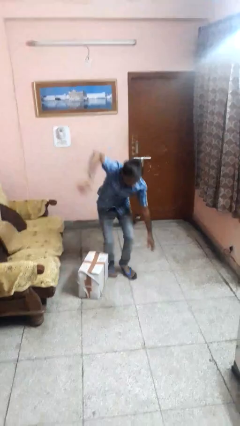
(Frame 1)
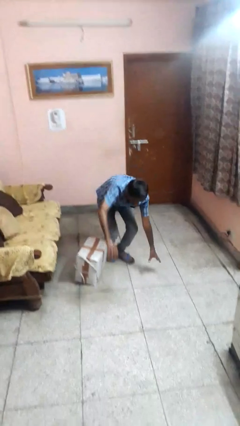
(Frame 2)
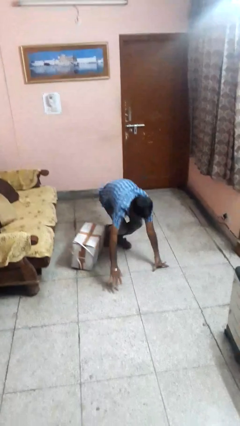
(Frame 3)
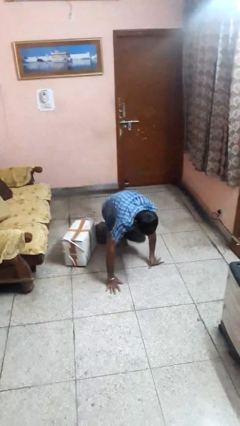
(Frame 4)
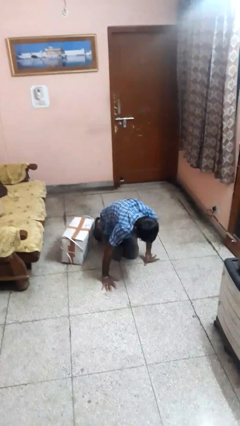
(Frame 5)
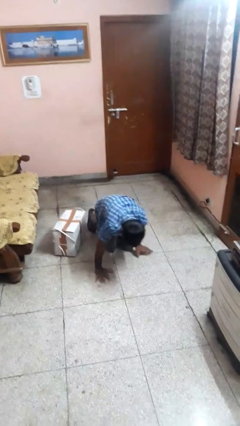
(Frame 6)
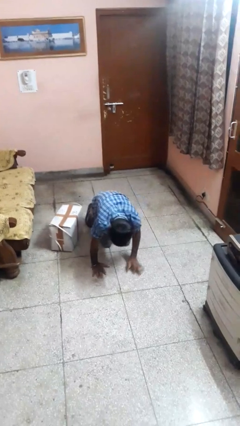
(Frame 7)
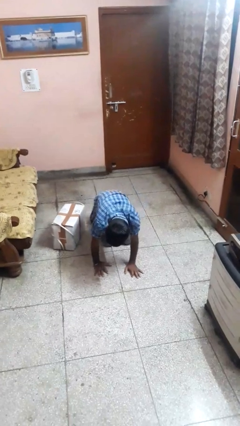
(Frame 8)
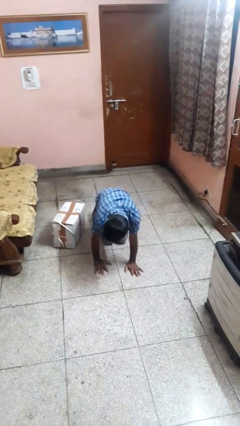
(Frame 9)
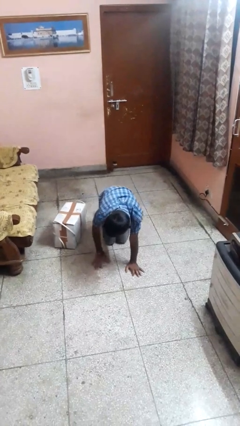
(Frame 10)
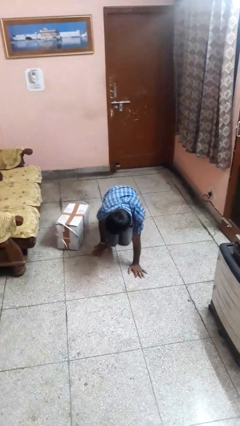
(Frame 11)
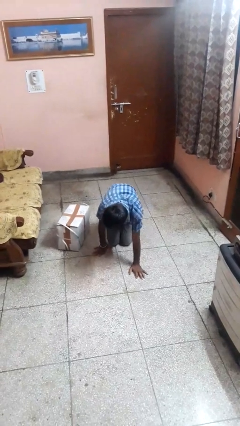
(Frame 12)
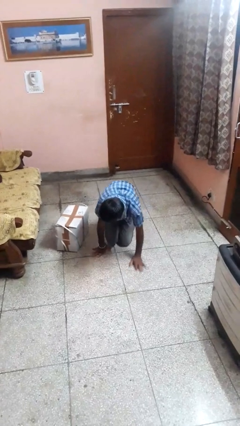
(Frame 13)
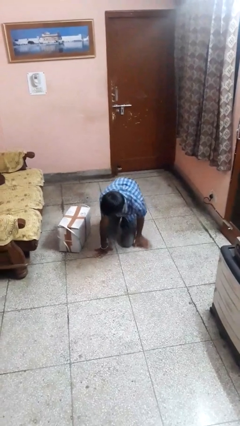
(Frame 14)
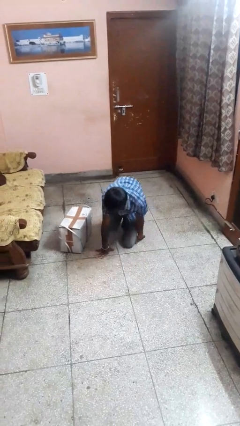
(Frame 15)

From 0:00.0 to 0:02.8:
person trips on object on floor

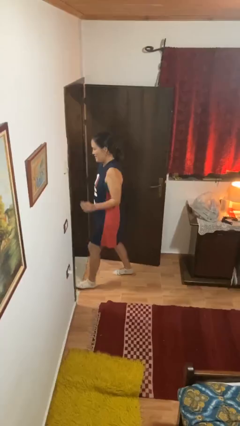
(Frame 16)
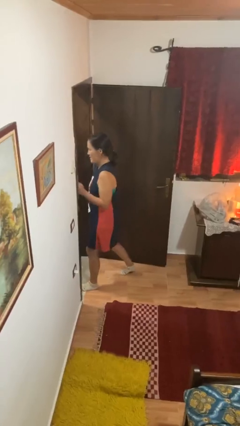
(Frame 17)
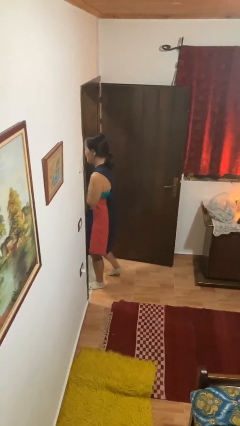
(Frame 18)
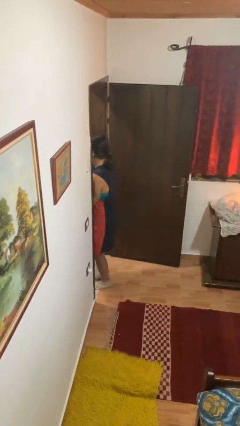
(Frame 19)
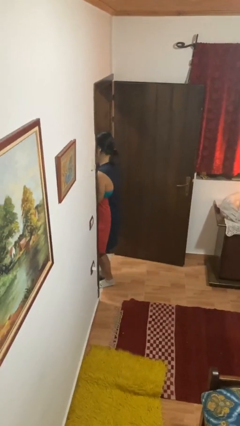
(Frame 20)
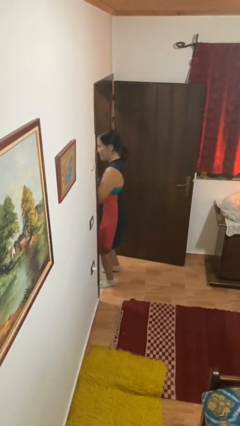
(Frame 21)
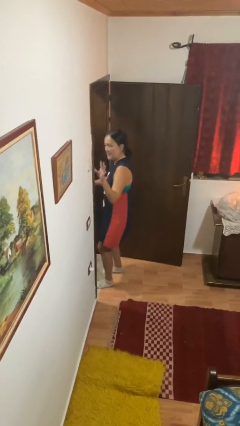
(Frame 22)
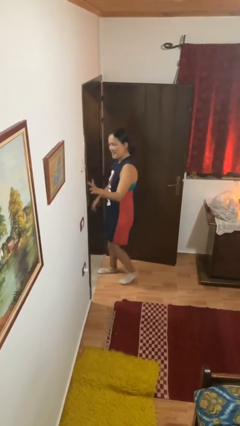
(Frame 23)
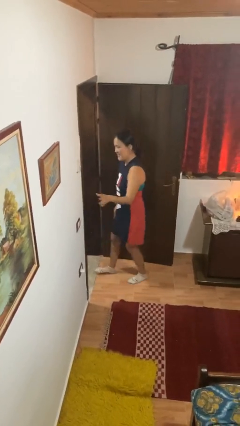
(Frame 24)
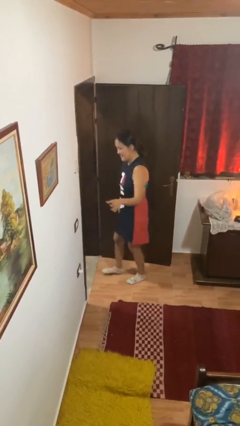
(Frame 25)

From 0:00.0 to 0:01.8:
person bumps into wall

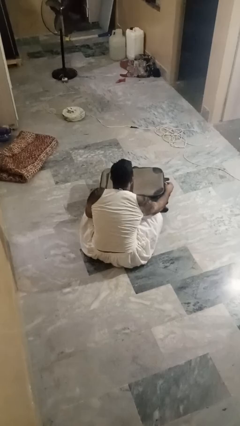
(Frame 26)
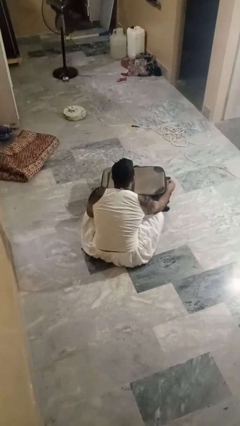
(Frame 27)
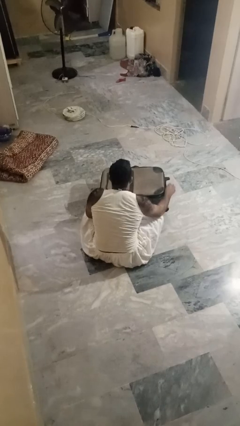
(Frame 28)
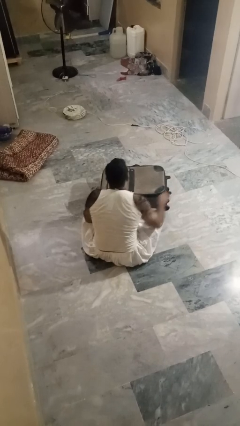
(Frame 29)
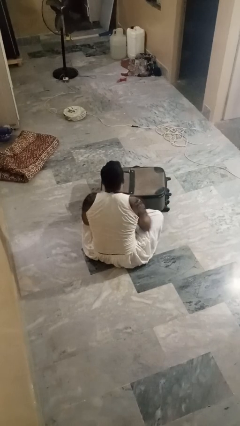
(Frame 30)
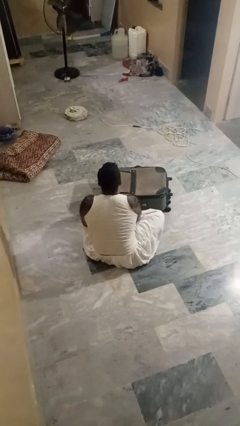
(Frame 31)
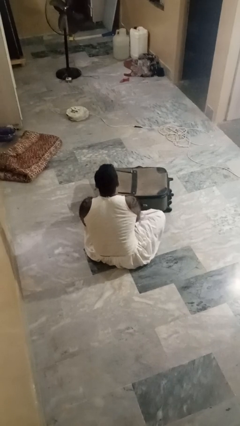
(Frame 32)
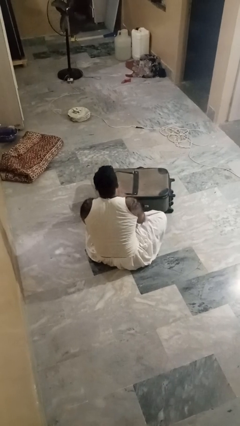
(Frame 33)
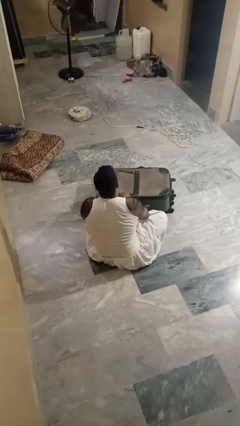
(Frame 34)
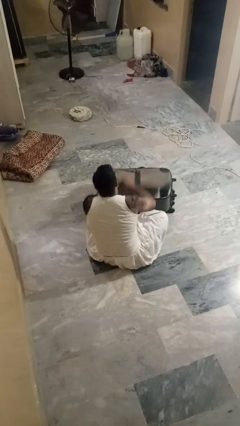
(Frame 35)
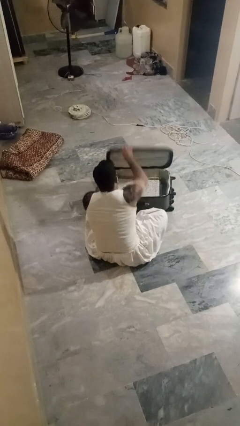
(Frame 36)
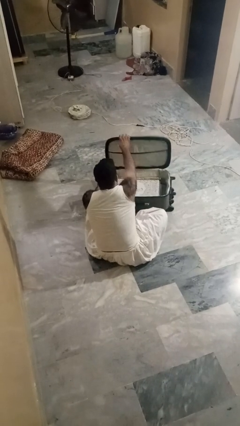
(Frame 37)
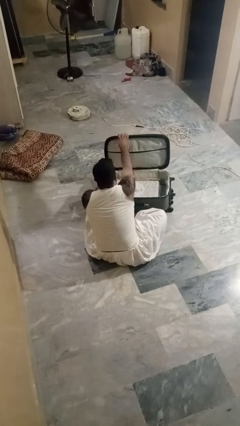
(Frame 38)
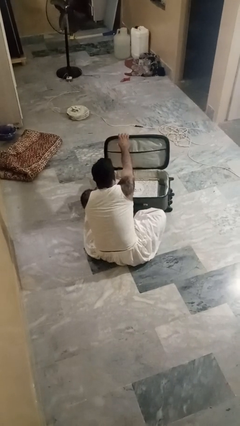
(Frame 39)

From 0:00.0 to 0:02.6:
person opens suitcase

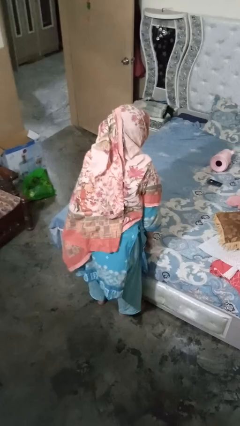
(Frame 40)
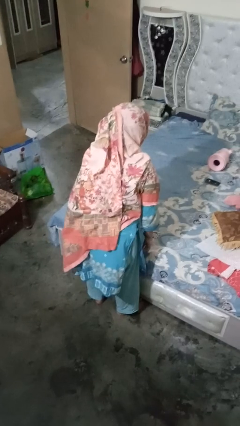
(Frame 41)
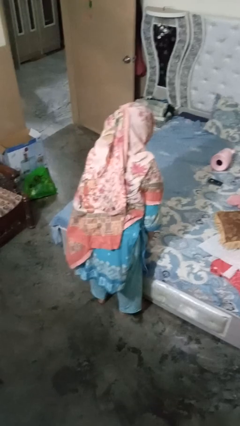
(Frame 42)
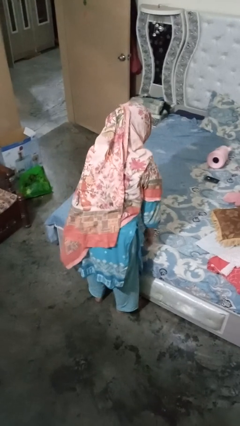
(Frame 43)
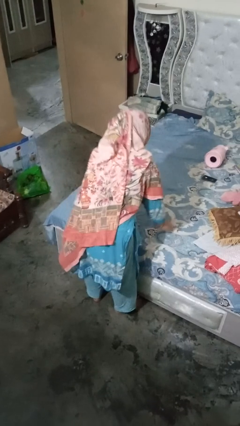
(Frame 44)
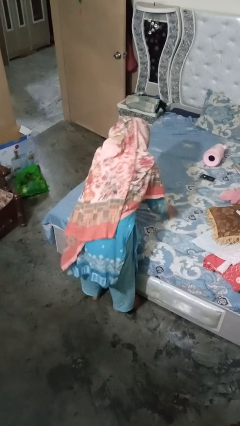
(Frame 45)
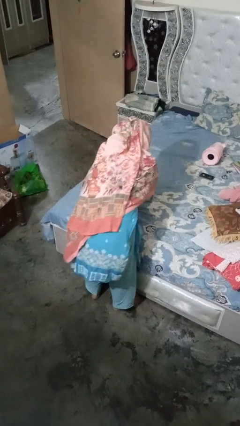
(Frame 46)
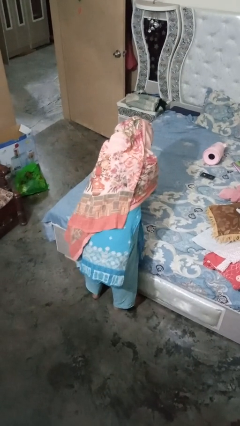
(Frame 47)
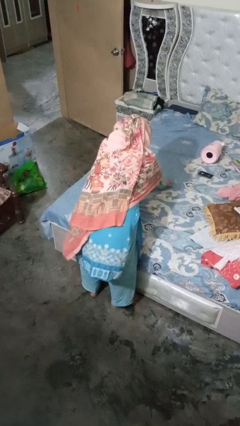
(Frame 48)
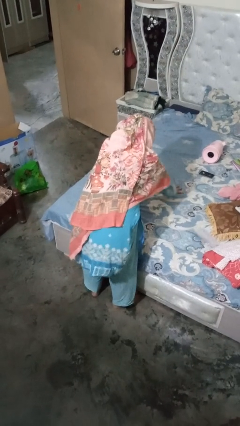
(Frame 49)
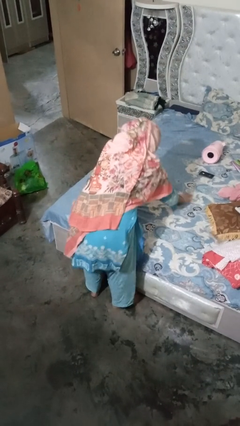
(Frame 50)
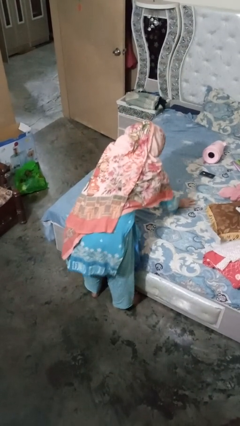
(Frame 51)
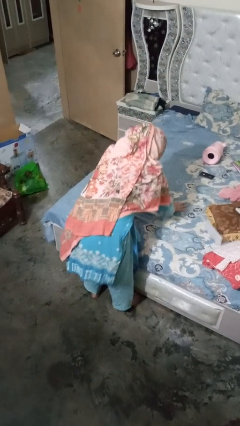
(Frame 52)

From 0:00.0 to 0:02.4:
person searches under bed

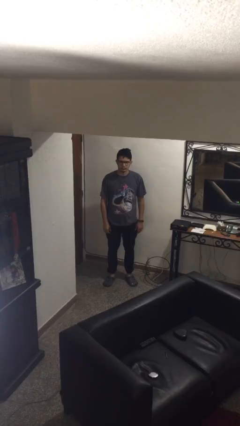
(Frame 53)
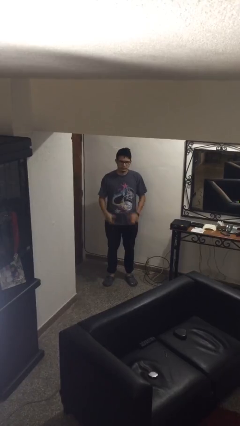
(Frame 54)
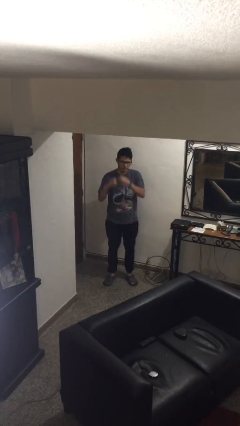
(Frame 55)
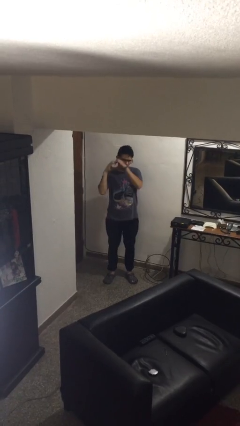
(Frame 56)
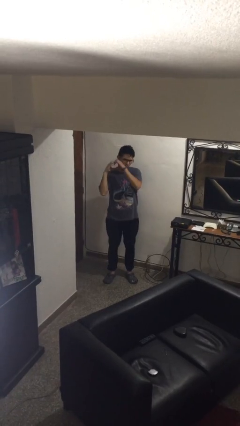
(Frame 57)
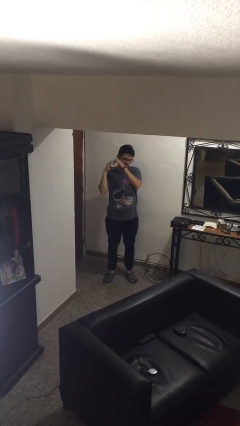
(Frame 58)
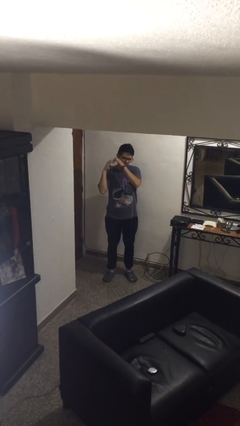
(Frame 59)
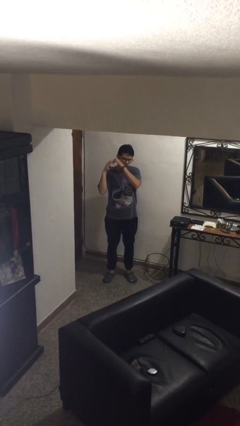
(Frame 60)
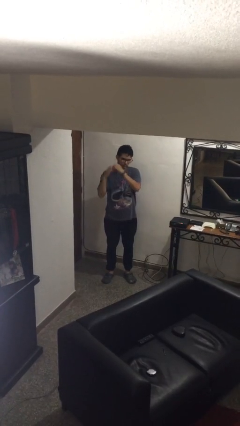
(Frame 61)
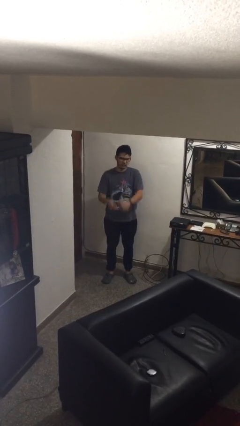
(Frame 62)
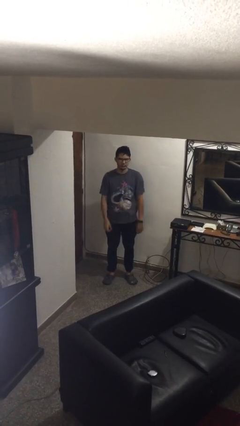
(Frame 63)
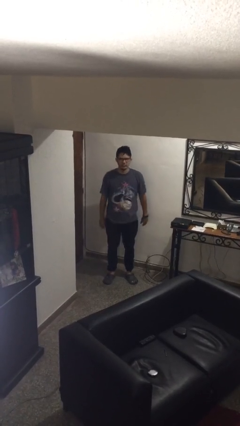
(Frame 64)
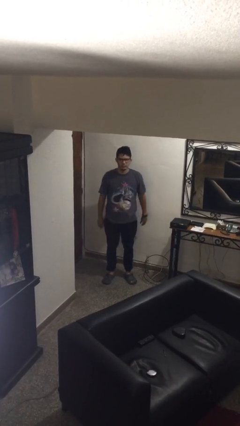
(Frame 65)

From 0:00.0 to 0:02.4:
person gestures heart

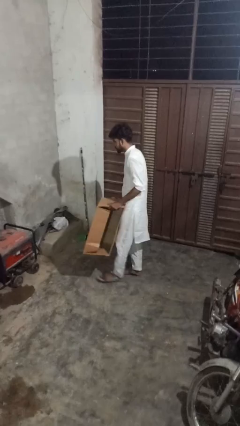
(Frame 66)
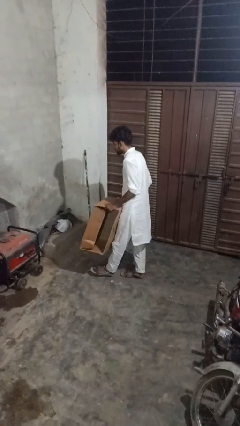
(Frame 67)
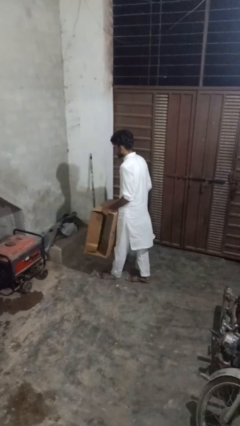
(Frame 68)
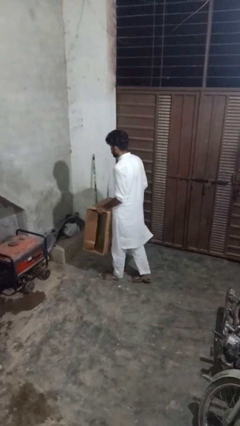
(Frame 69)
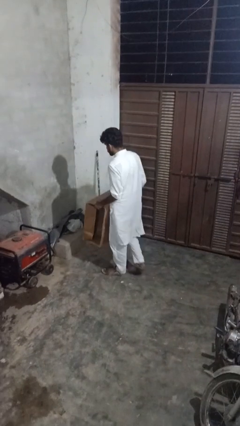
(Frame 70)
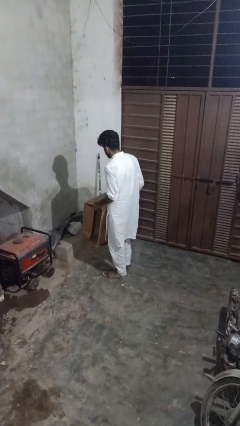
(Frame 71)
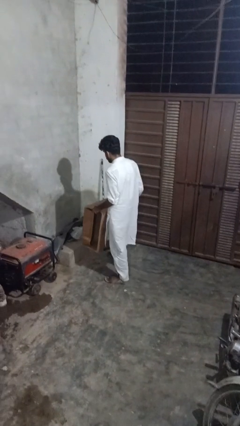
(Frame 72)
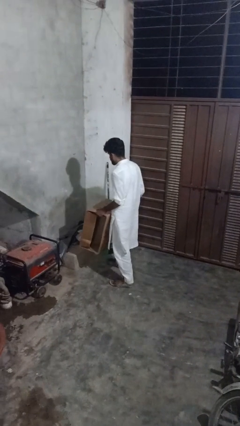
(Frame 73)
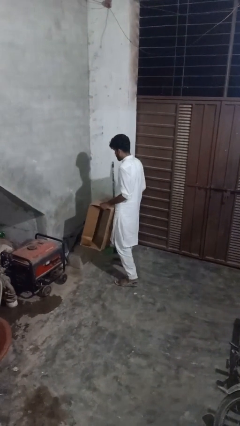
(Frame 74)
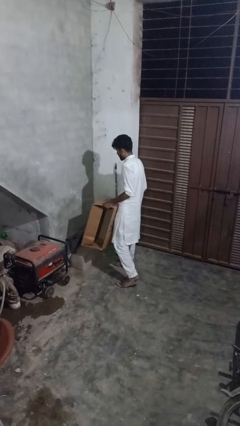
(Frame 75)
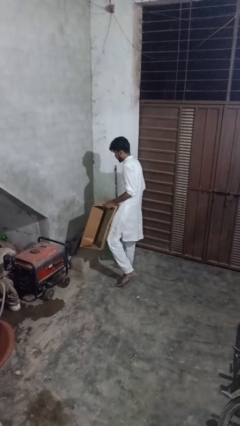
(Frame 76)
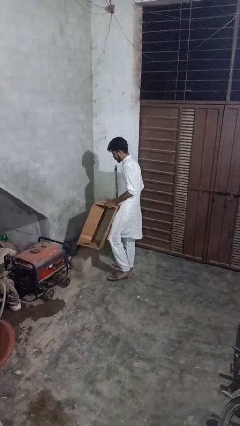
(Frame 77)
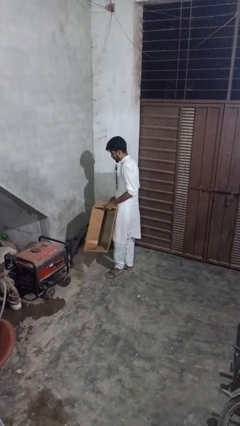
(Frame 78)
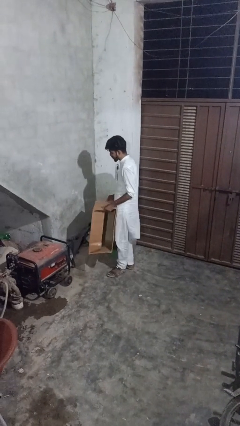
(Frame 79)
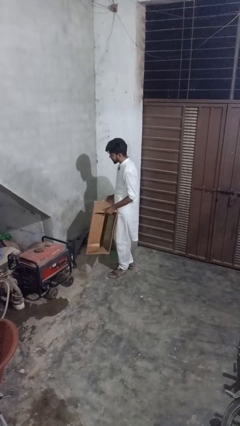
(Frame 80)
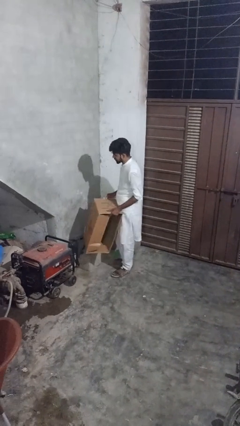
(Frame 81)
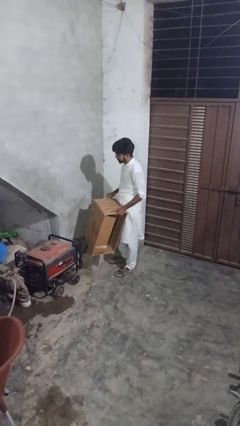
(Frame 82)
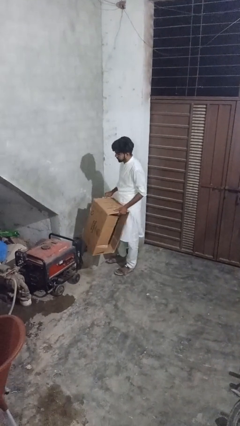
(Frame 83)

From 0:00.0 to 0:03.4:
person carries laundry basket

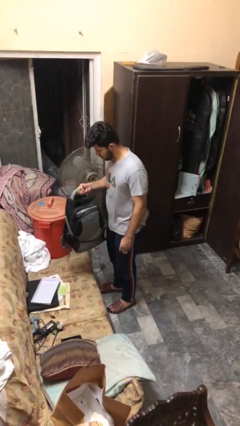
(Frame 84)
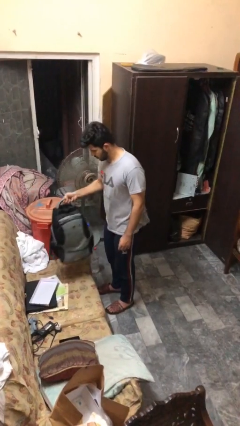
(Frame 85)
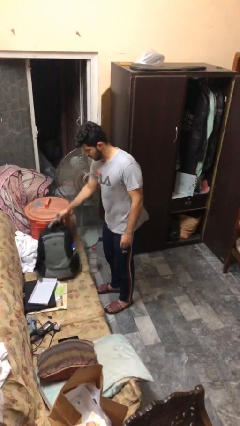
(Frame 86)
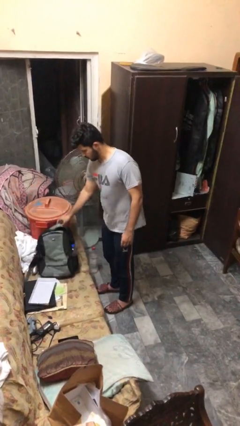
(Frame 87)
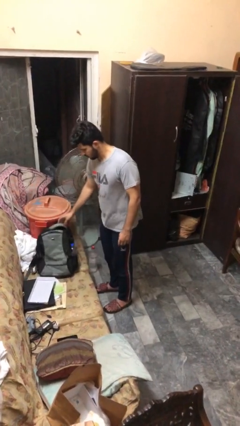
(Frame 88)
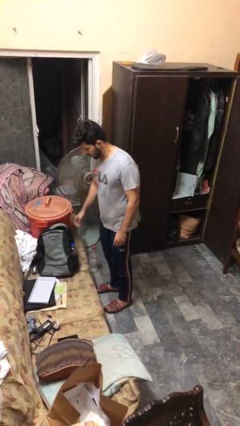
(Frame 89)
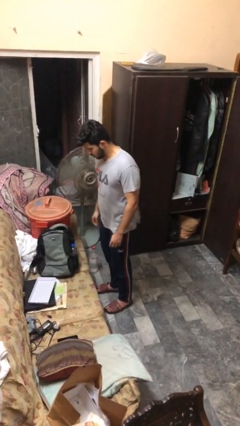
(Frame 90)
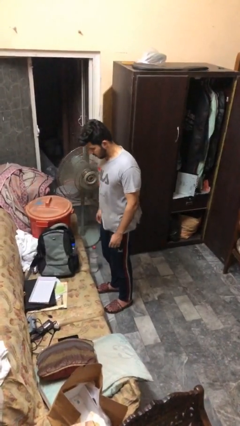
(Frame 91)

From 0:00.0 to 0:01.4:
person puts down object on couch

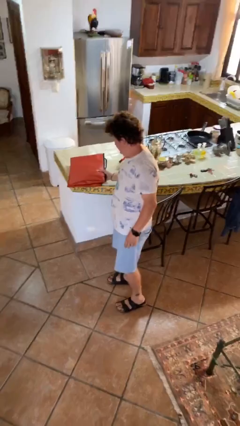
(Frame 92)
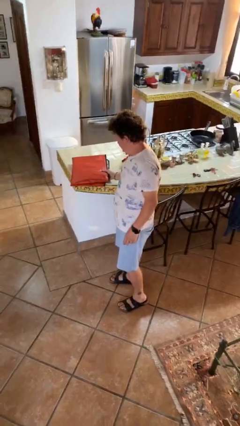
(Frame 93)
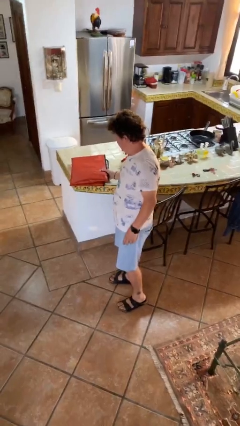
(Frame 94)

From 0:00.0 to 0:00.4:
person puts down object on table
